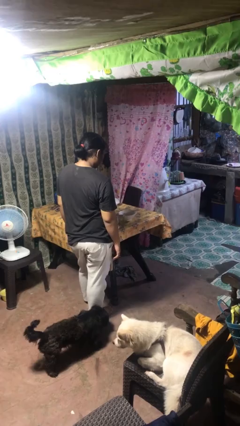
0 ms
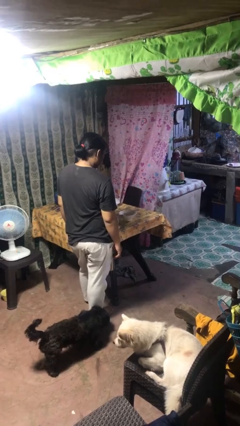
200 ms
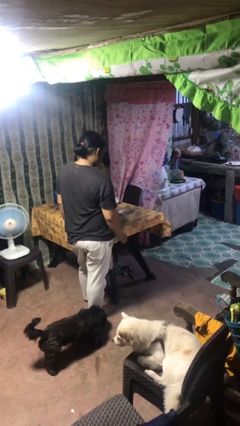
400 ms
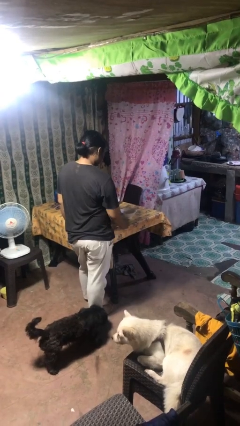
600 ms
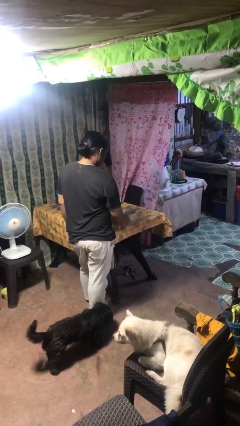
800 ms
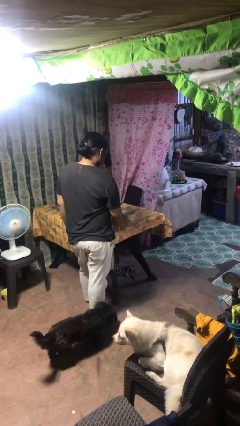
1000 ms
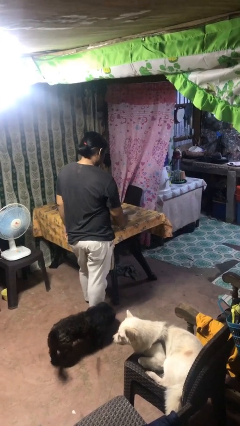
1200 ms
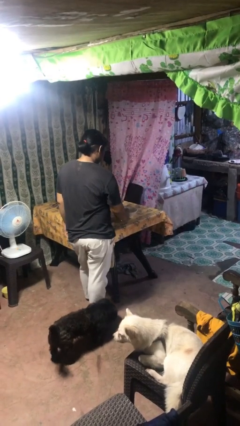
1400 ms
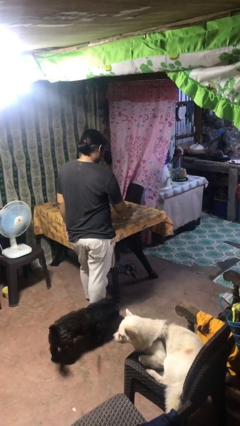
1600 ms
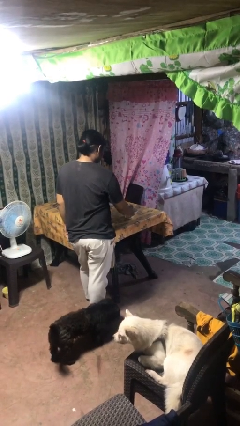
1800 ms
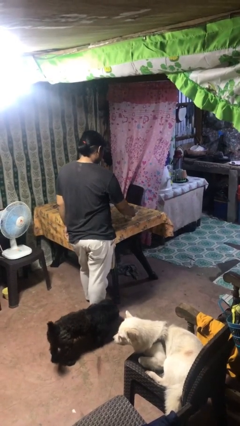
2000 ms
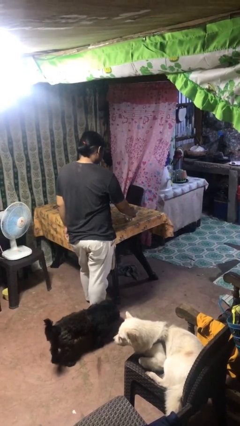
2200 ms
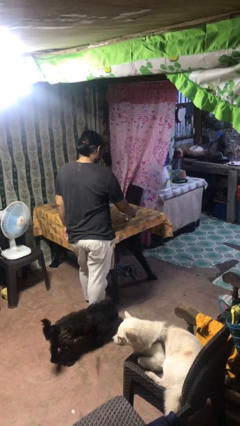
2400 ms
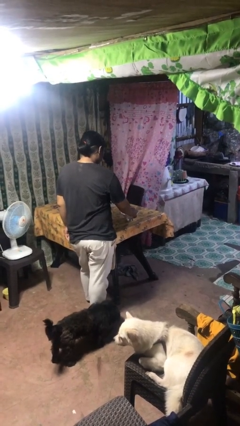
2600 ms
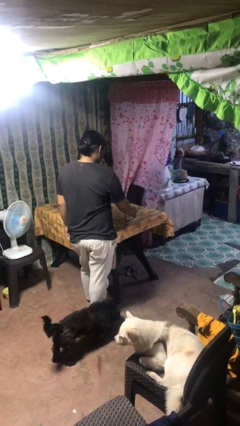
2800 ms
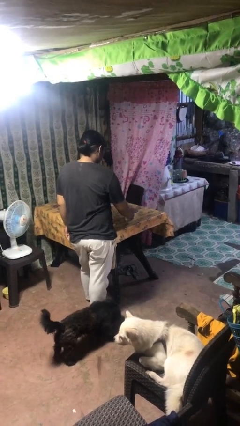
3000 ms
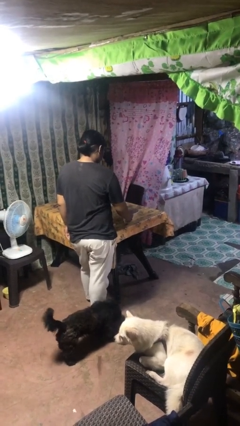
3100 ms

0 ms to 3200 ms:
person pours into bowl

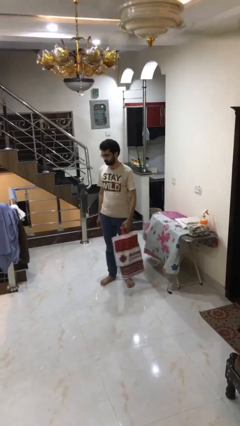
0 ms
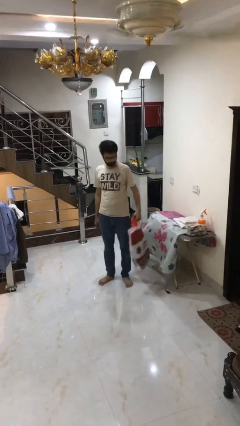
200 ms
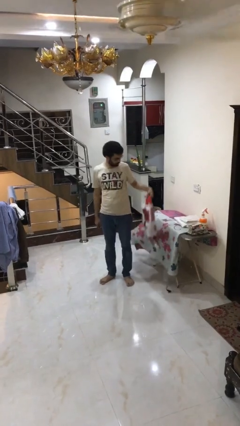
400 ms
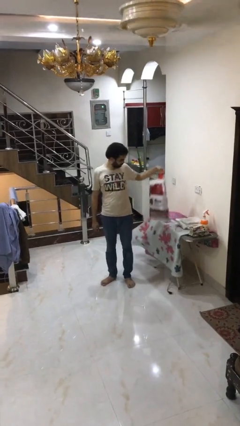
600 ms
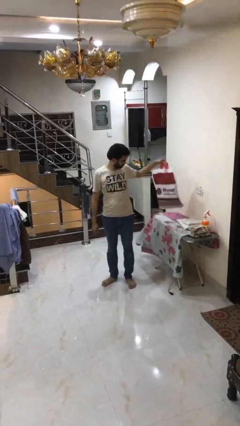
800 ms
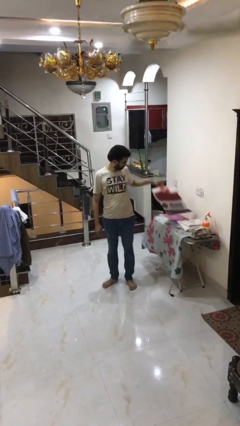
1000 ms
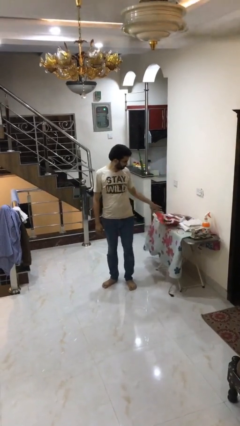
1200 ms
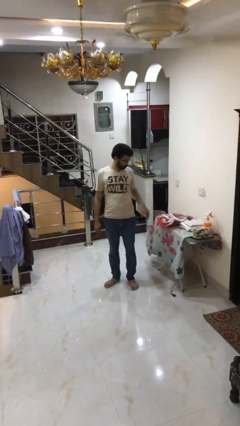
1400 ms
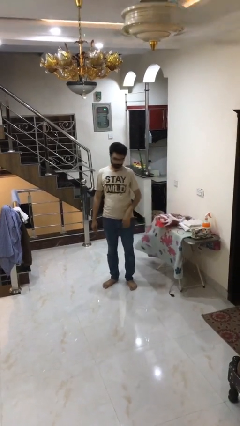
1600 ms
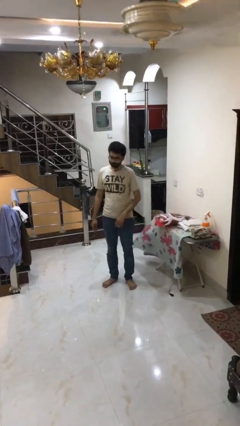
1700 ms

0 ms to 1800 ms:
person puts down object on table

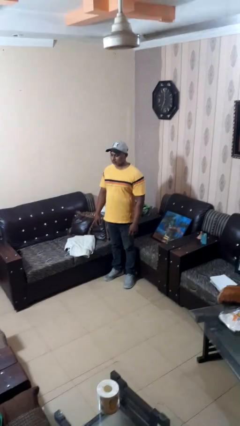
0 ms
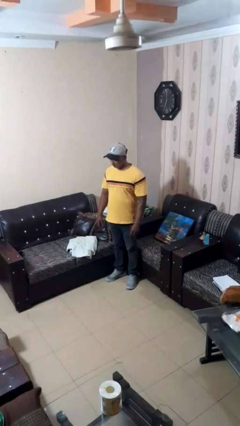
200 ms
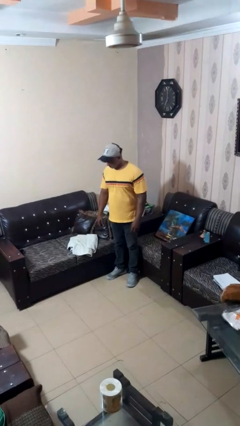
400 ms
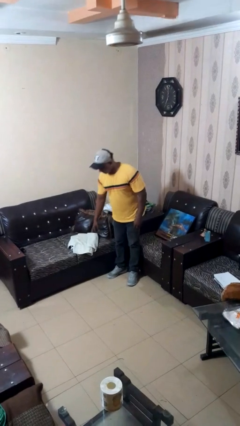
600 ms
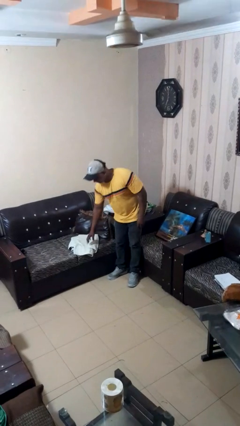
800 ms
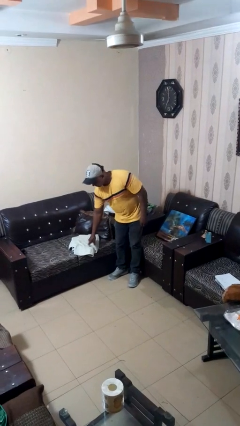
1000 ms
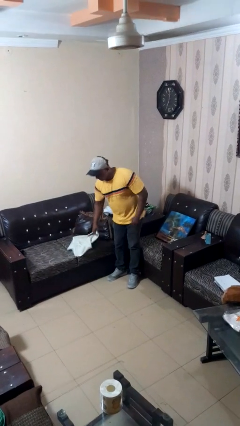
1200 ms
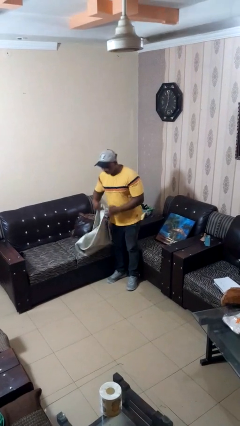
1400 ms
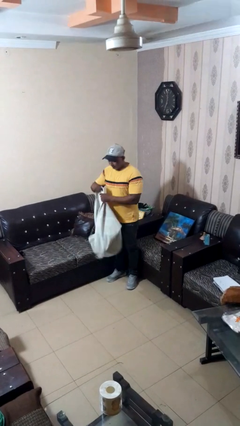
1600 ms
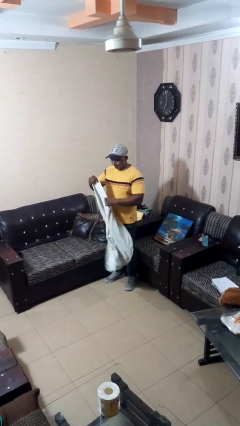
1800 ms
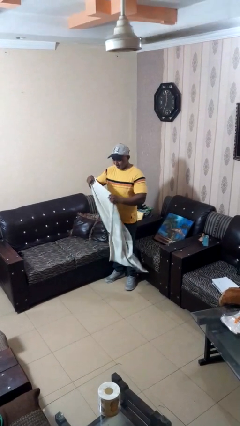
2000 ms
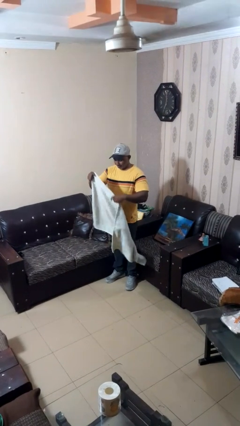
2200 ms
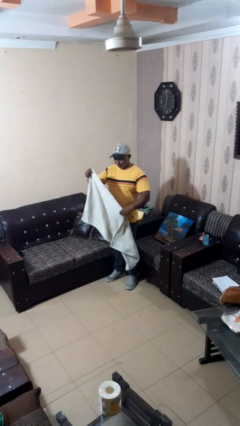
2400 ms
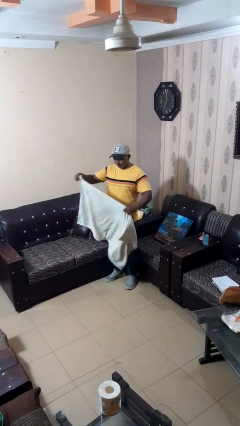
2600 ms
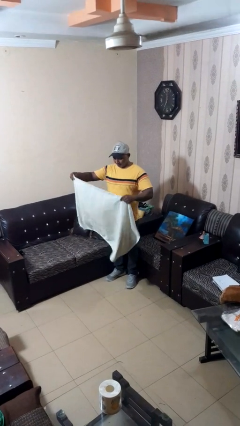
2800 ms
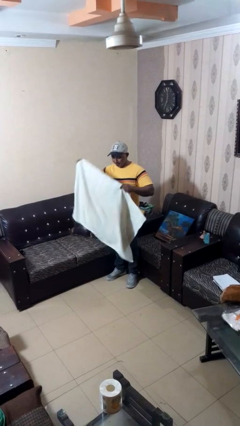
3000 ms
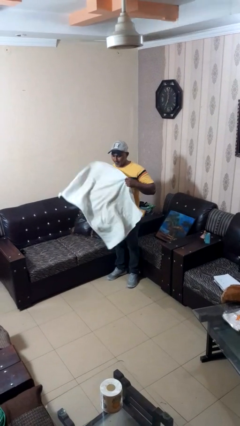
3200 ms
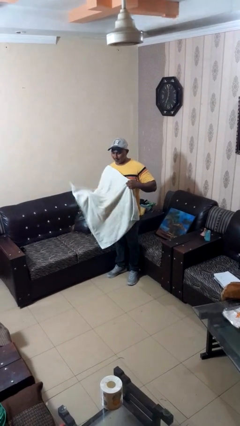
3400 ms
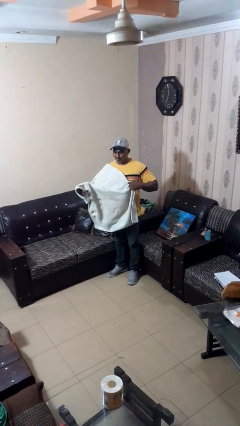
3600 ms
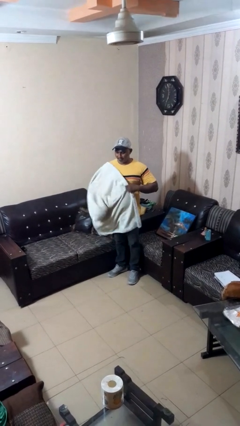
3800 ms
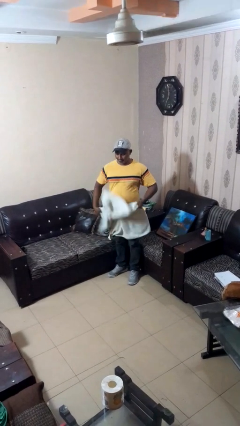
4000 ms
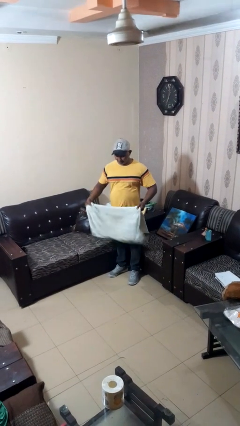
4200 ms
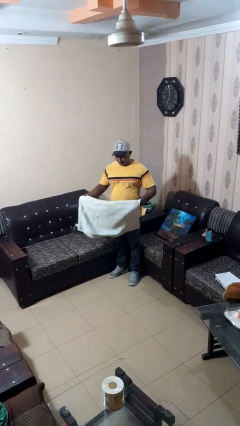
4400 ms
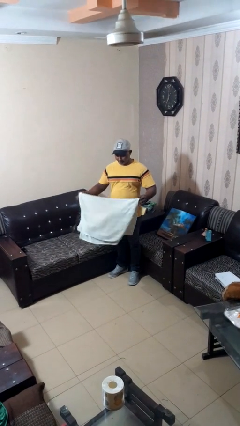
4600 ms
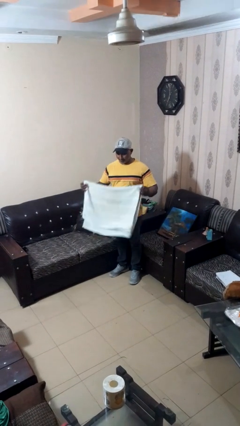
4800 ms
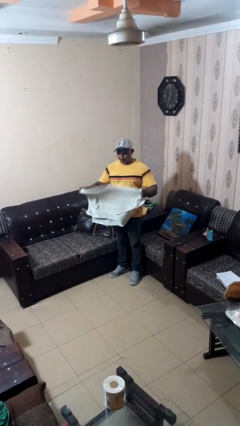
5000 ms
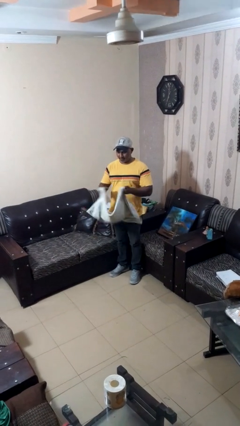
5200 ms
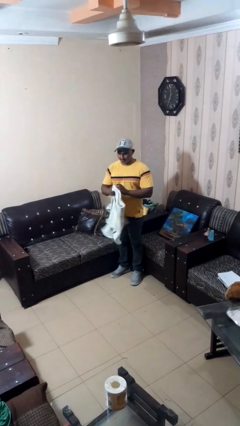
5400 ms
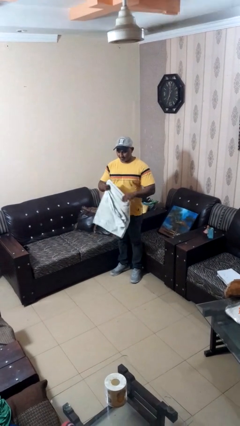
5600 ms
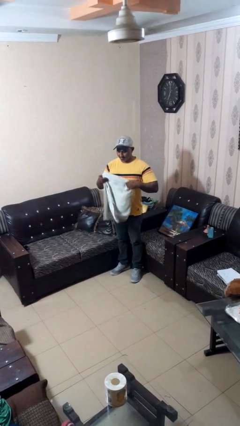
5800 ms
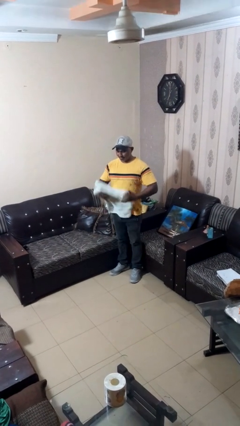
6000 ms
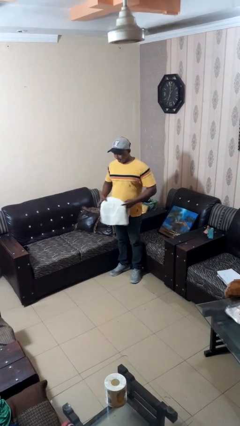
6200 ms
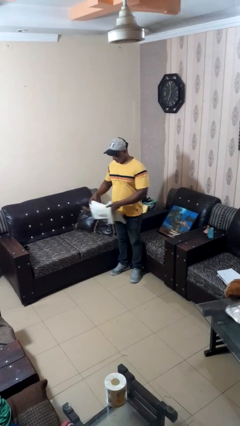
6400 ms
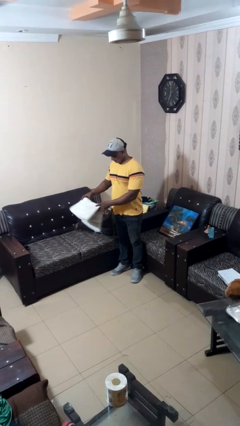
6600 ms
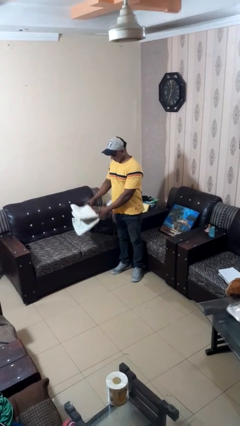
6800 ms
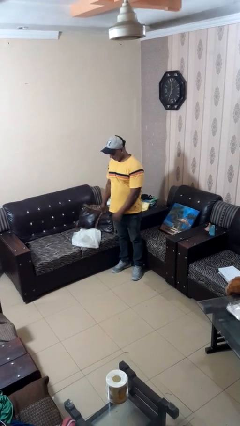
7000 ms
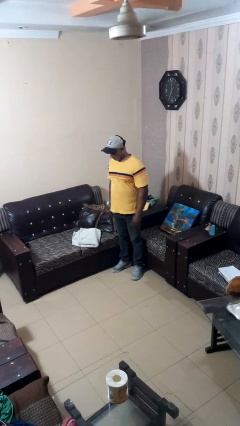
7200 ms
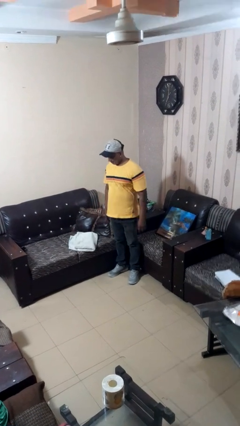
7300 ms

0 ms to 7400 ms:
person folds towel

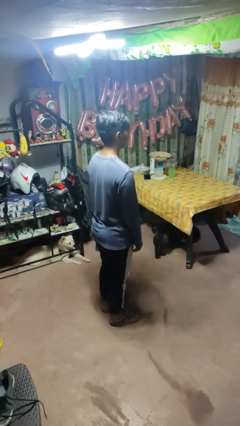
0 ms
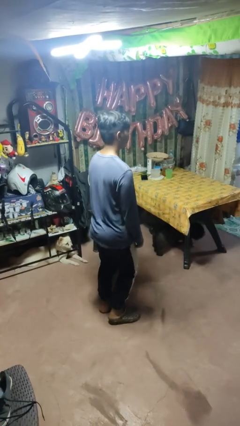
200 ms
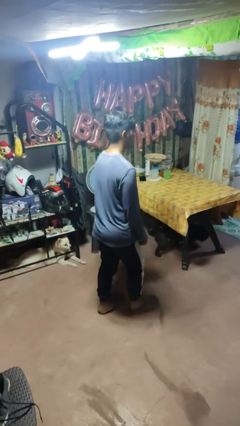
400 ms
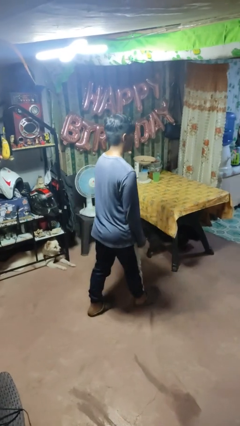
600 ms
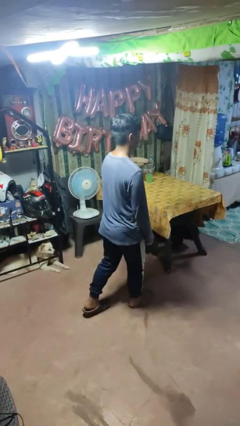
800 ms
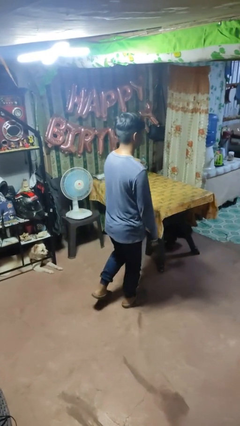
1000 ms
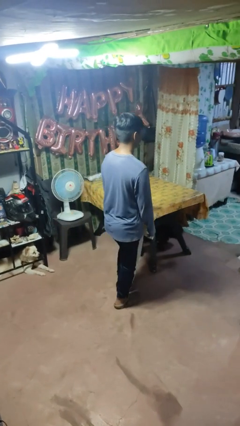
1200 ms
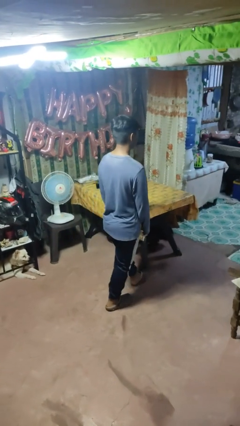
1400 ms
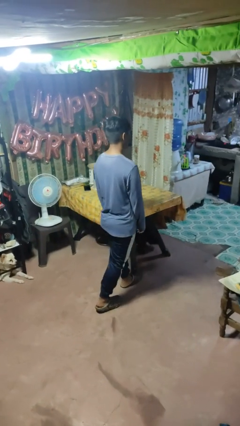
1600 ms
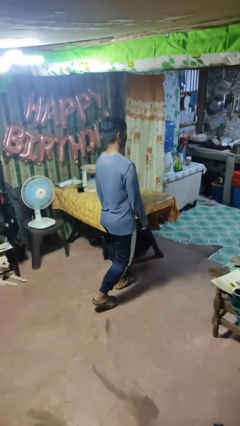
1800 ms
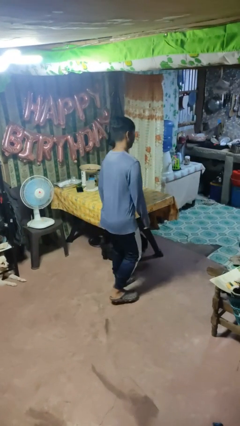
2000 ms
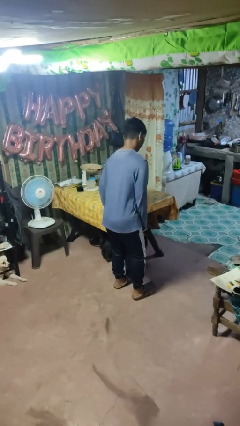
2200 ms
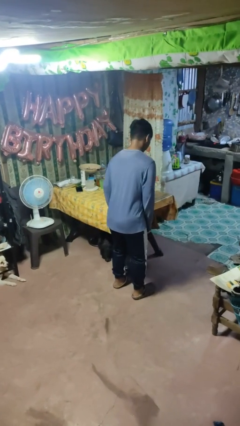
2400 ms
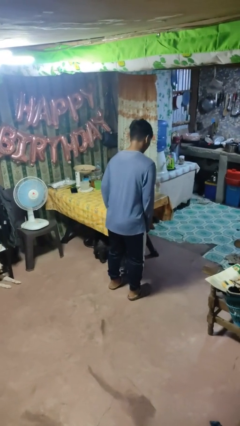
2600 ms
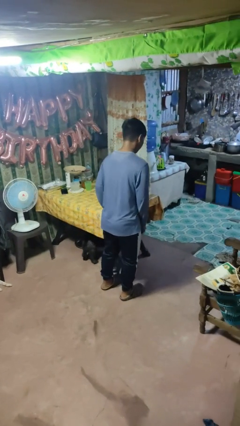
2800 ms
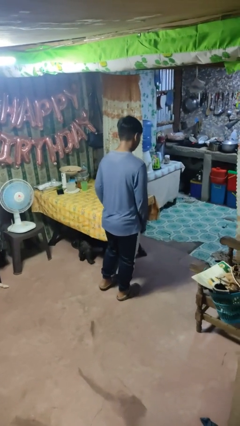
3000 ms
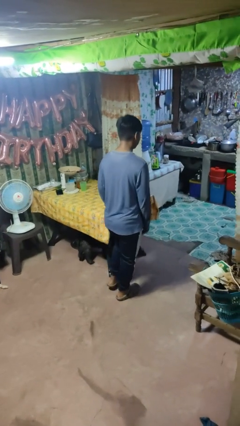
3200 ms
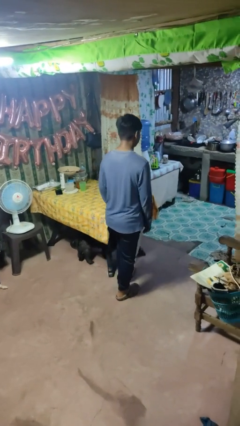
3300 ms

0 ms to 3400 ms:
person bumps into table

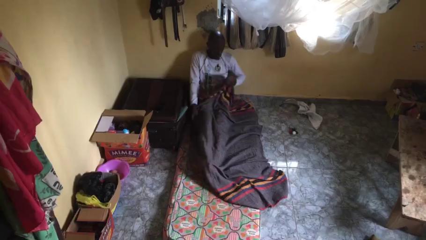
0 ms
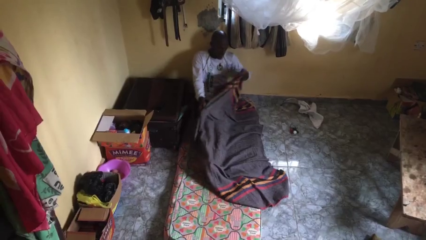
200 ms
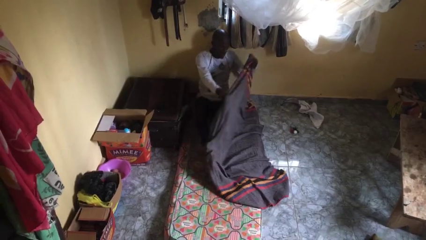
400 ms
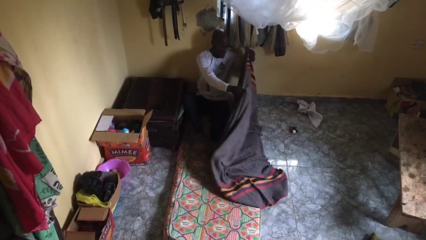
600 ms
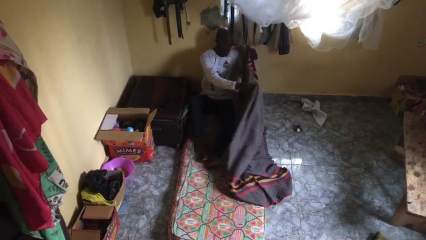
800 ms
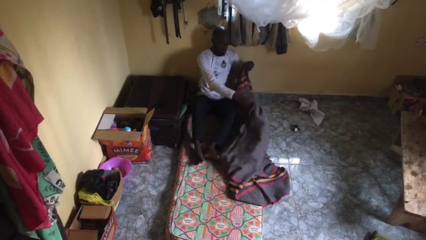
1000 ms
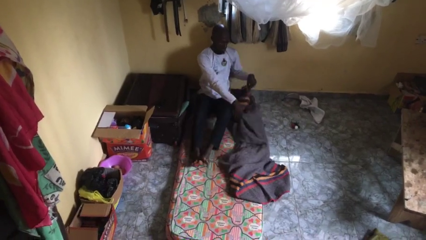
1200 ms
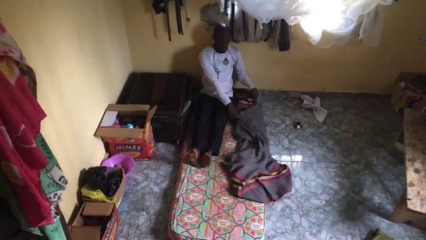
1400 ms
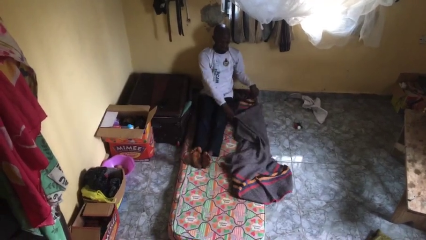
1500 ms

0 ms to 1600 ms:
person uncovers with blanket
